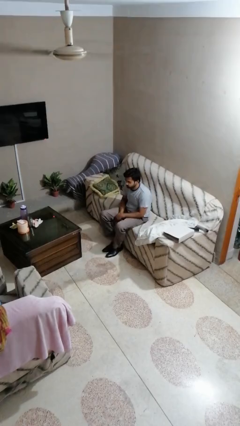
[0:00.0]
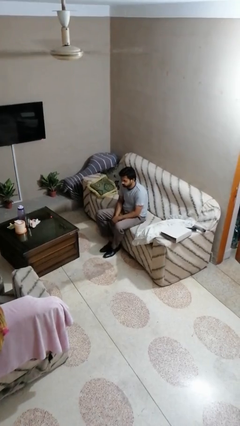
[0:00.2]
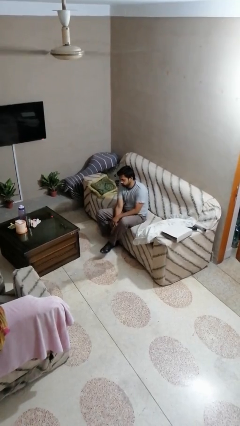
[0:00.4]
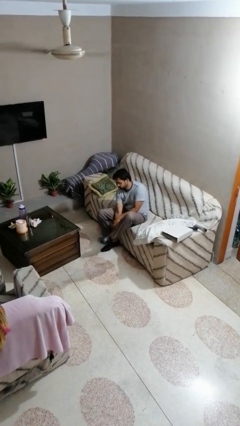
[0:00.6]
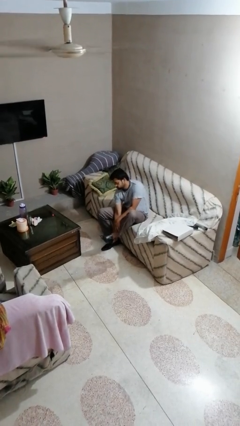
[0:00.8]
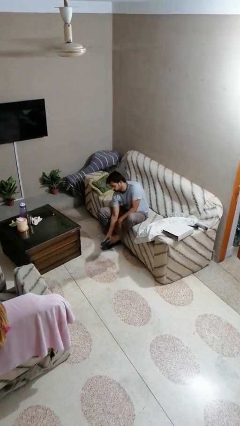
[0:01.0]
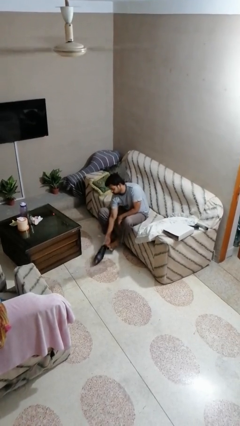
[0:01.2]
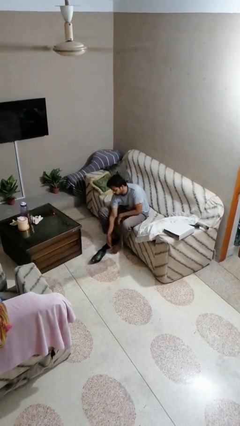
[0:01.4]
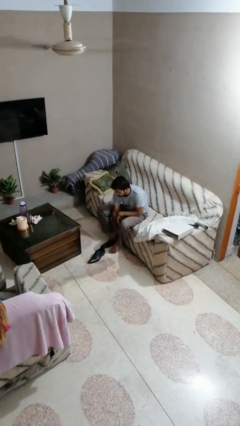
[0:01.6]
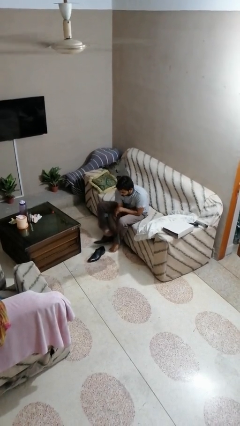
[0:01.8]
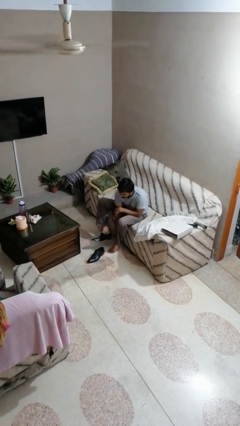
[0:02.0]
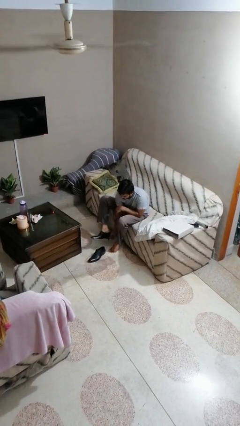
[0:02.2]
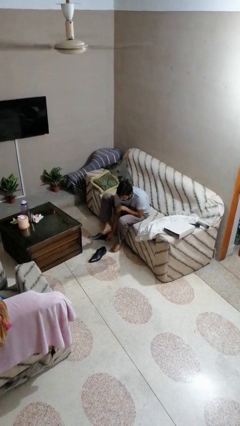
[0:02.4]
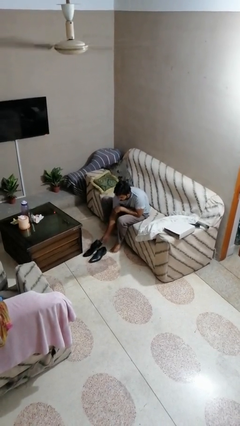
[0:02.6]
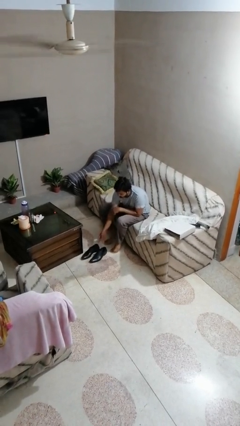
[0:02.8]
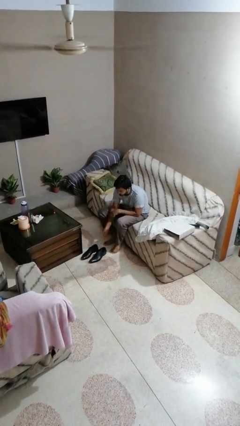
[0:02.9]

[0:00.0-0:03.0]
person takes off shoes

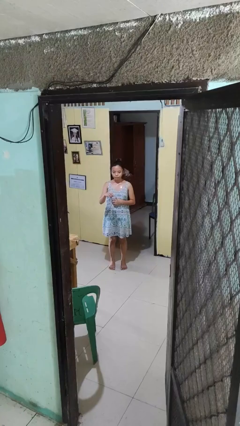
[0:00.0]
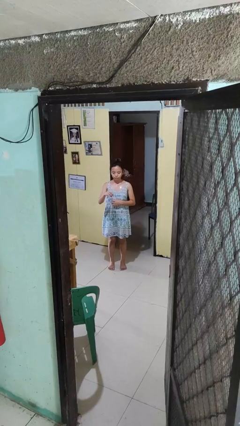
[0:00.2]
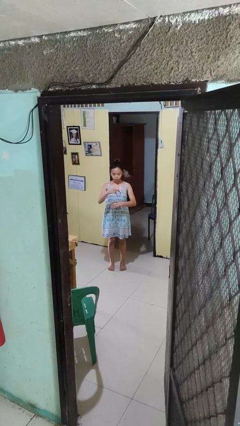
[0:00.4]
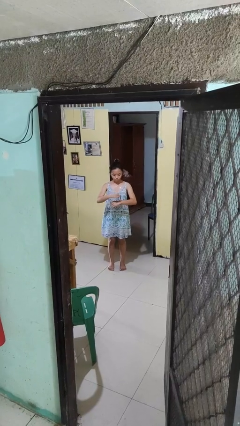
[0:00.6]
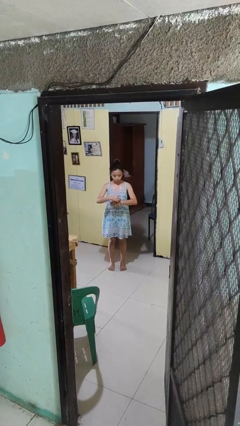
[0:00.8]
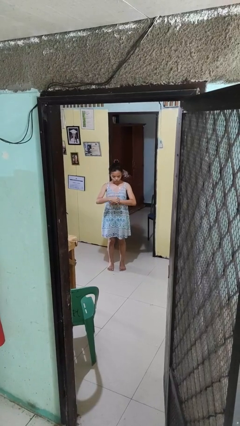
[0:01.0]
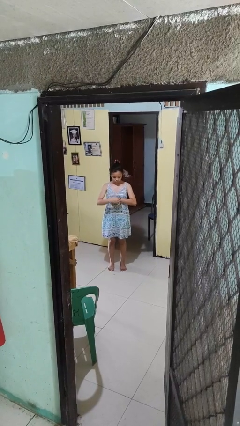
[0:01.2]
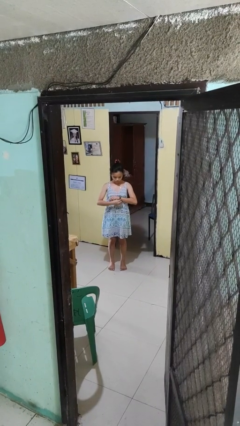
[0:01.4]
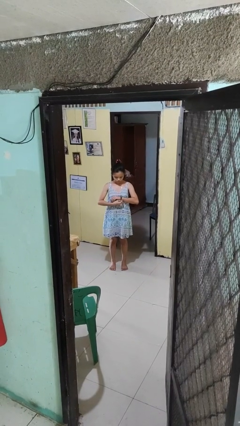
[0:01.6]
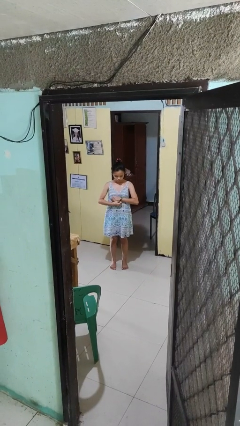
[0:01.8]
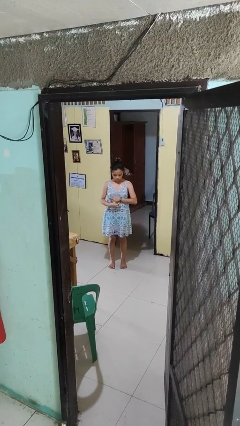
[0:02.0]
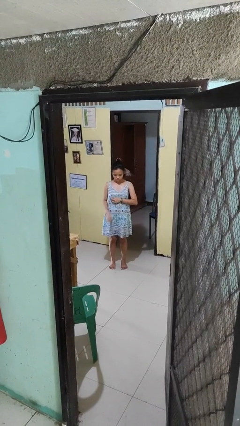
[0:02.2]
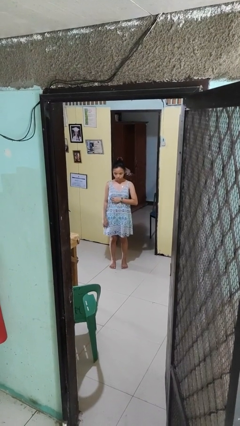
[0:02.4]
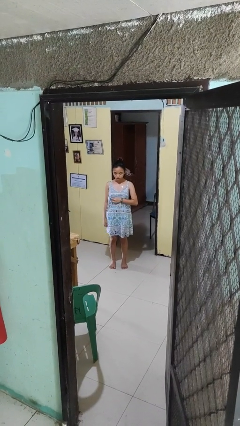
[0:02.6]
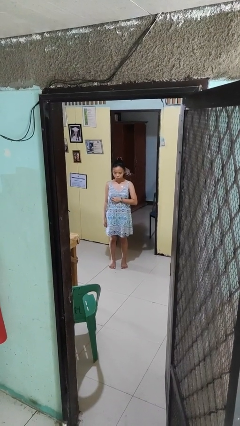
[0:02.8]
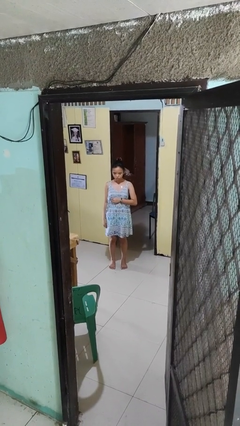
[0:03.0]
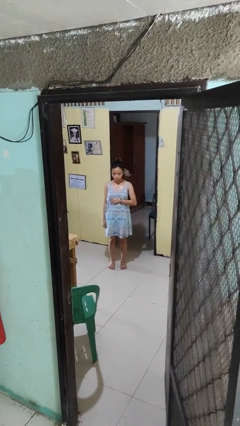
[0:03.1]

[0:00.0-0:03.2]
person puts on wristwatch

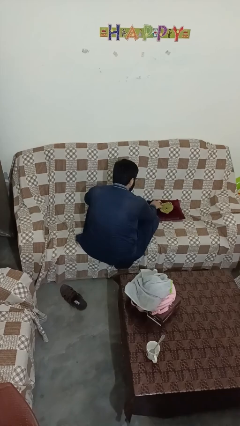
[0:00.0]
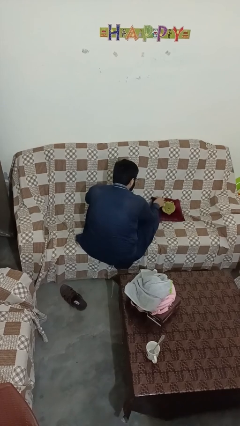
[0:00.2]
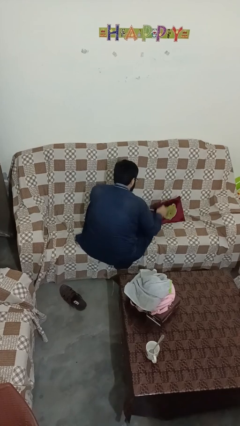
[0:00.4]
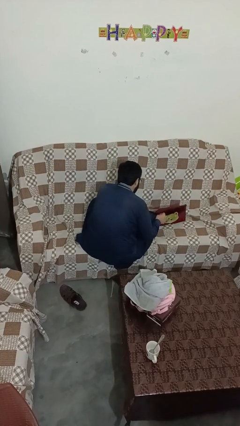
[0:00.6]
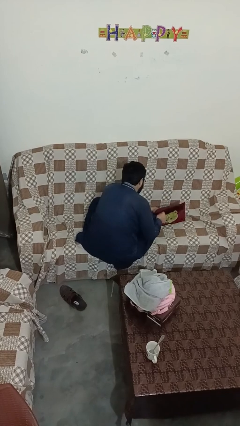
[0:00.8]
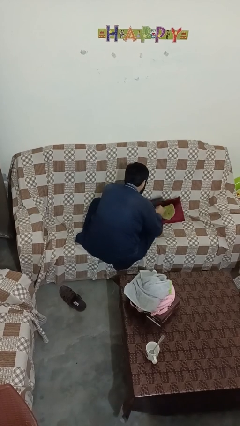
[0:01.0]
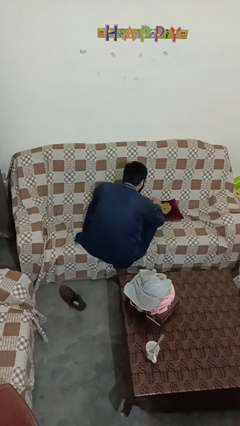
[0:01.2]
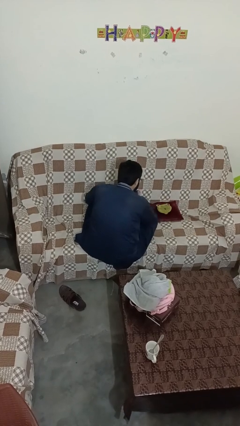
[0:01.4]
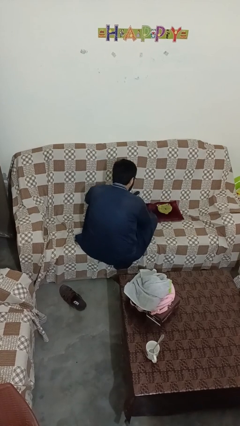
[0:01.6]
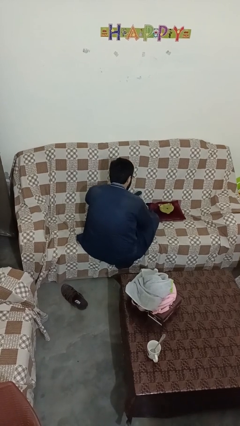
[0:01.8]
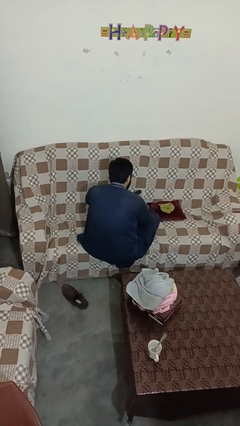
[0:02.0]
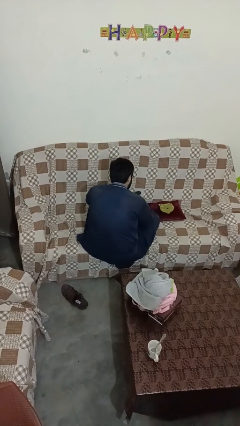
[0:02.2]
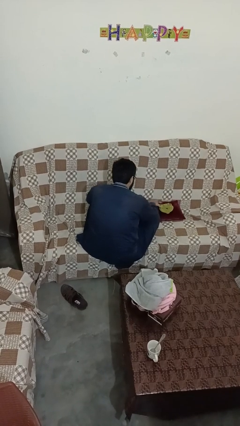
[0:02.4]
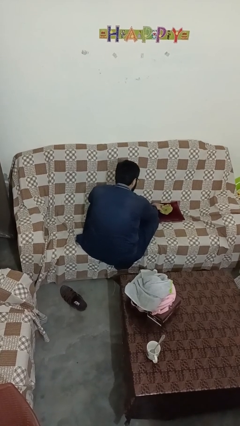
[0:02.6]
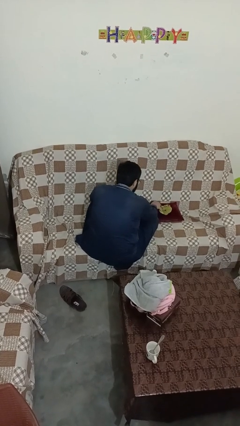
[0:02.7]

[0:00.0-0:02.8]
person searches in couch

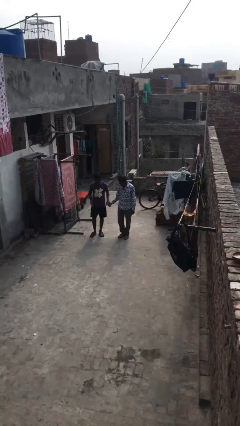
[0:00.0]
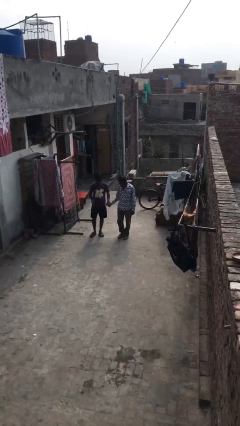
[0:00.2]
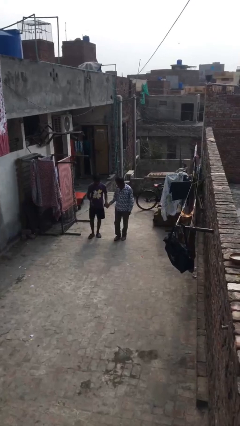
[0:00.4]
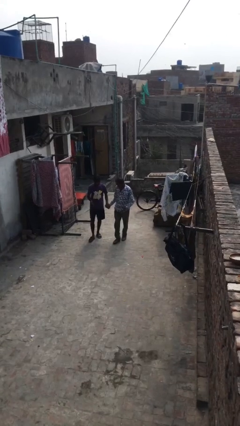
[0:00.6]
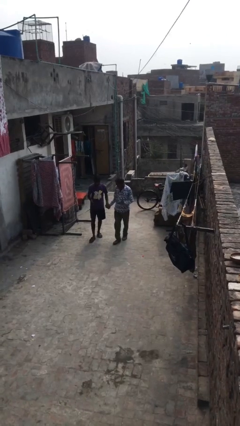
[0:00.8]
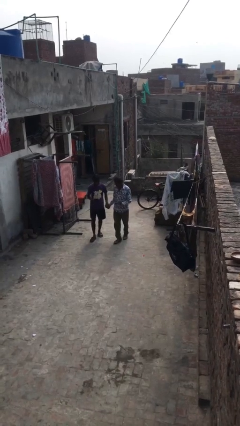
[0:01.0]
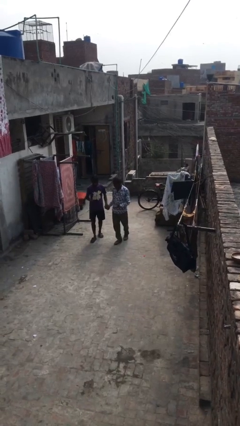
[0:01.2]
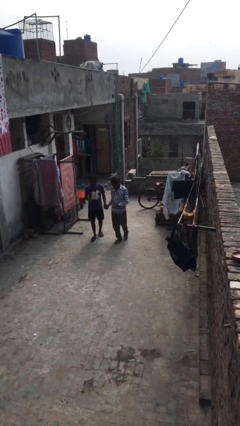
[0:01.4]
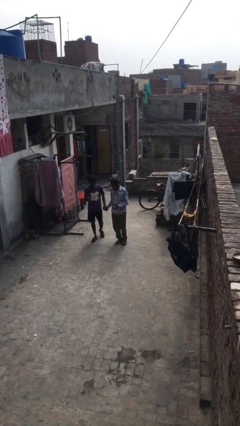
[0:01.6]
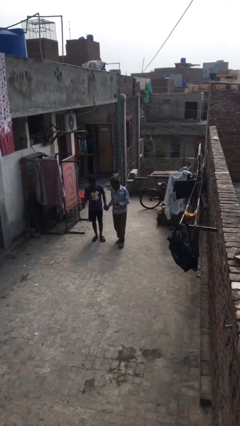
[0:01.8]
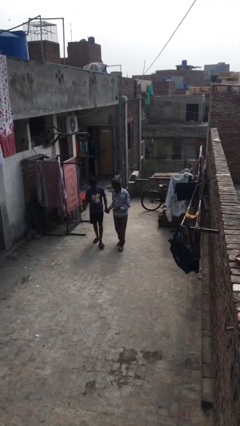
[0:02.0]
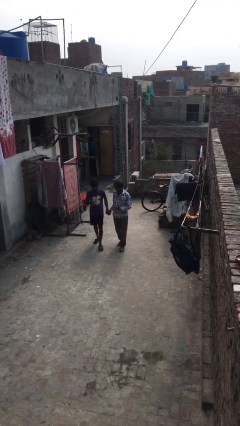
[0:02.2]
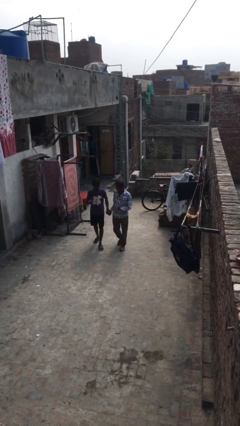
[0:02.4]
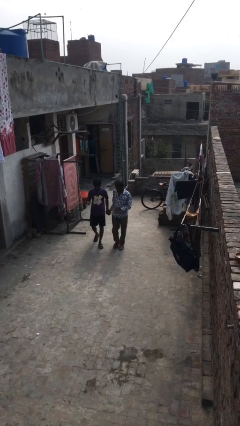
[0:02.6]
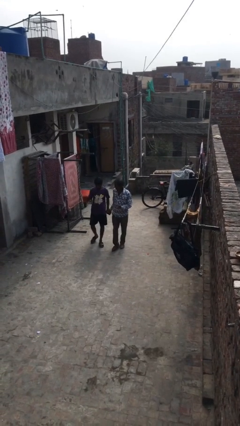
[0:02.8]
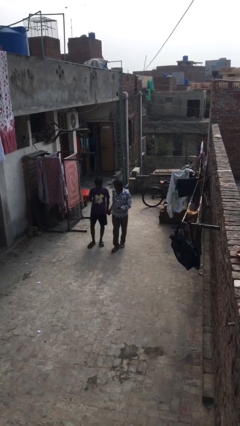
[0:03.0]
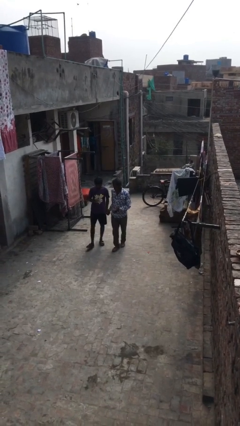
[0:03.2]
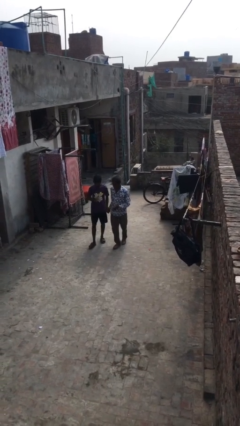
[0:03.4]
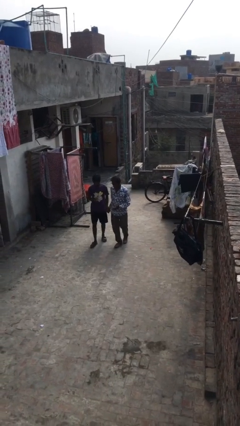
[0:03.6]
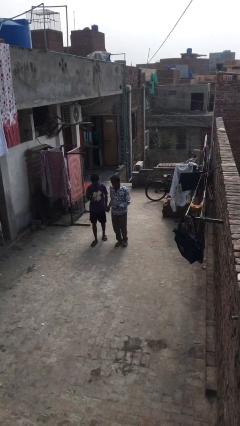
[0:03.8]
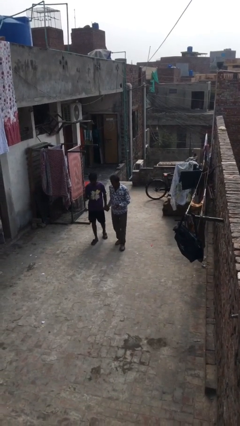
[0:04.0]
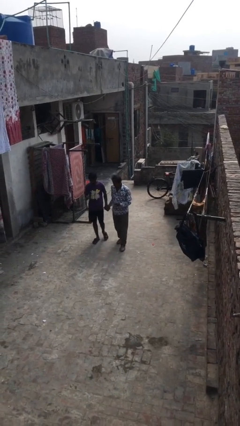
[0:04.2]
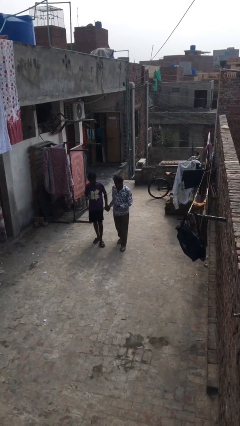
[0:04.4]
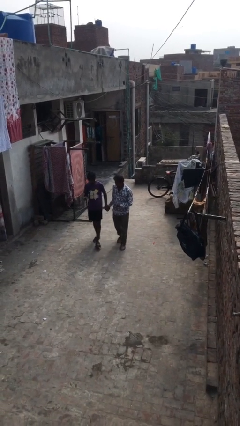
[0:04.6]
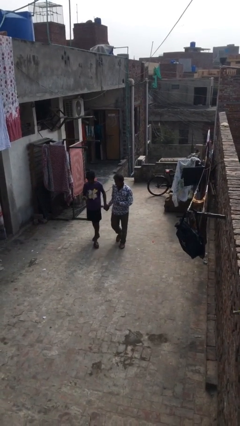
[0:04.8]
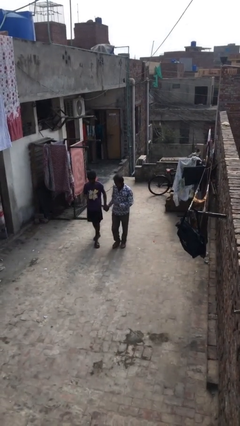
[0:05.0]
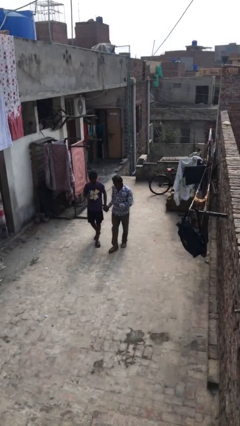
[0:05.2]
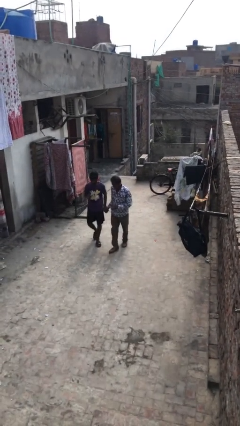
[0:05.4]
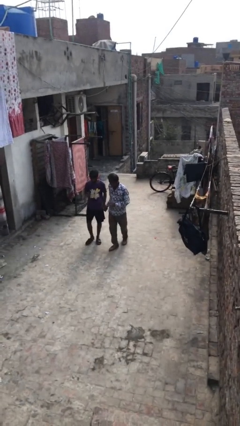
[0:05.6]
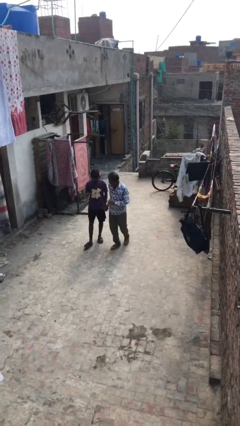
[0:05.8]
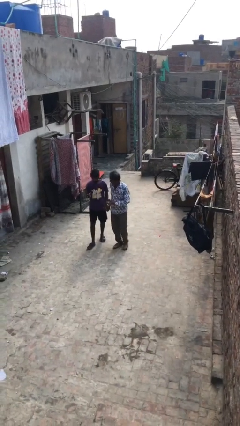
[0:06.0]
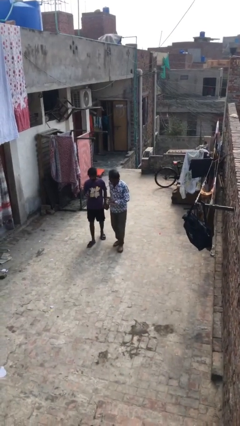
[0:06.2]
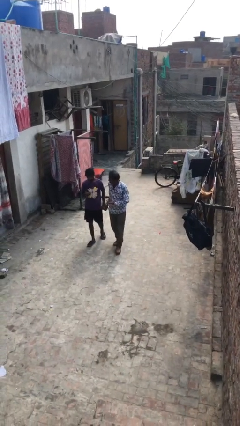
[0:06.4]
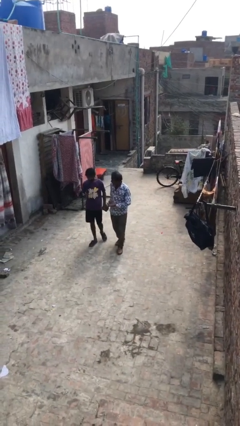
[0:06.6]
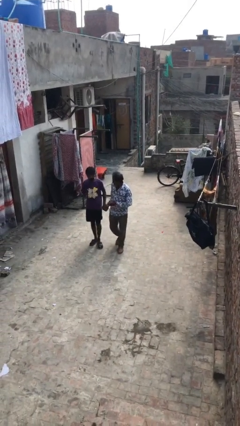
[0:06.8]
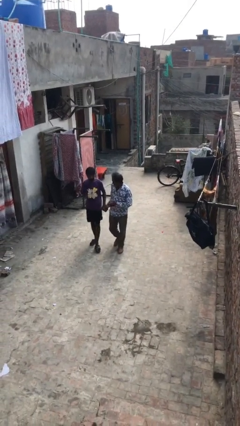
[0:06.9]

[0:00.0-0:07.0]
person holds hand

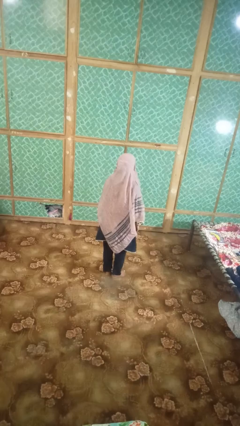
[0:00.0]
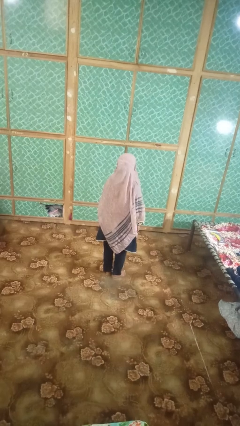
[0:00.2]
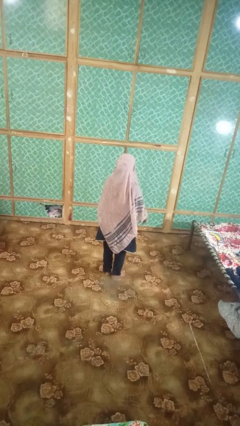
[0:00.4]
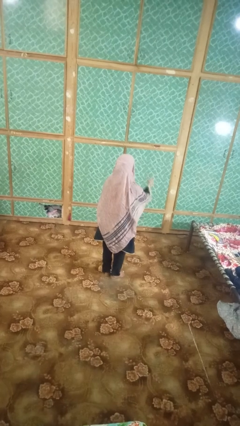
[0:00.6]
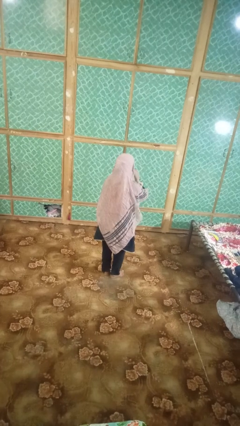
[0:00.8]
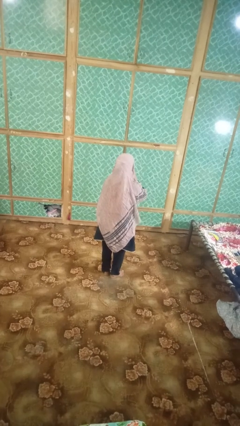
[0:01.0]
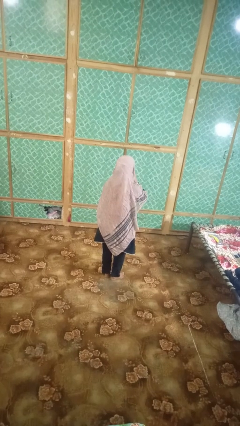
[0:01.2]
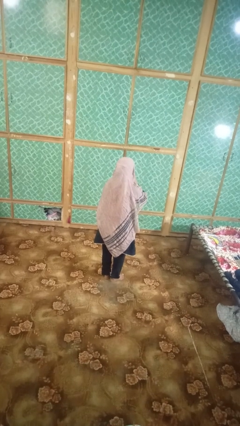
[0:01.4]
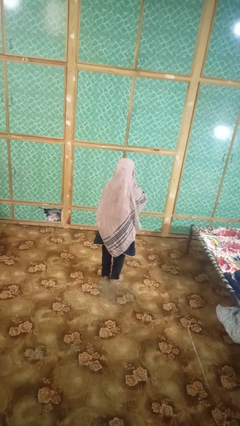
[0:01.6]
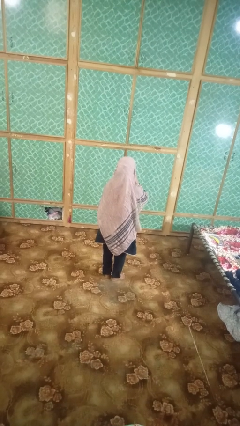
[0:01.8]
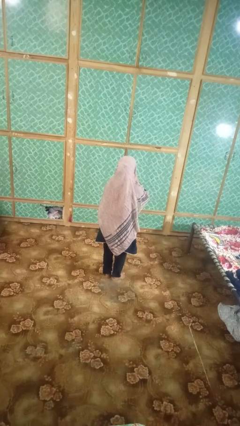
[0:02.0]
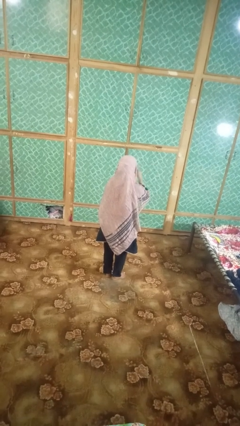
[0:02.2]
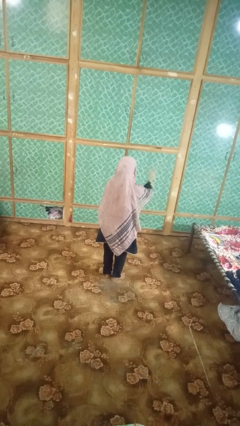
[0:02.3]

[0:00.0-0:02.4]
person gestures be quiet
